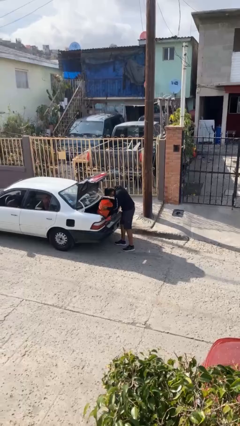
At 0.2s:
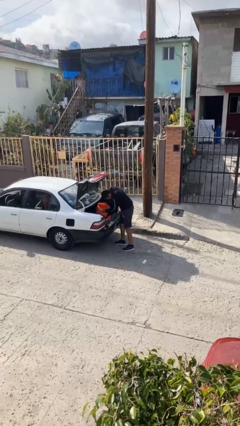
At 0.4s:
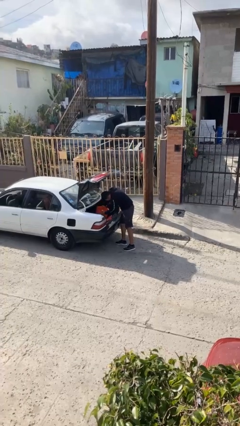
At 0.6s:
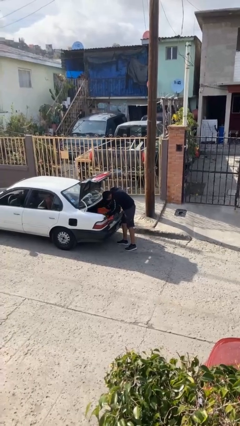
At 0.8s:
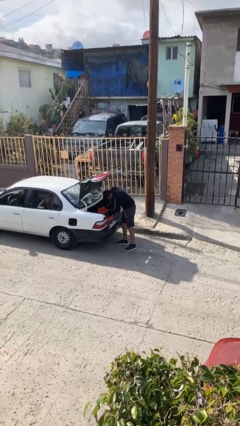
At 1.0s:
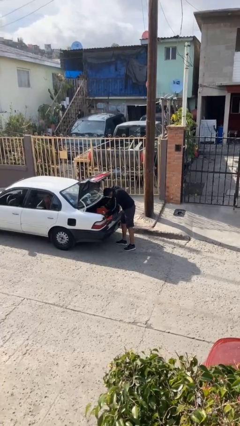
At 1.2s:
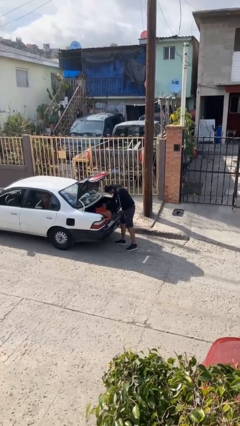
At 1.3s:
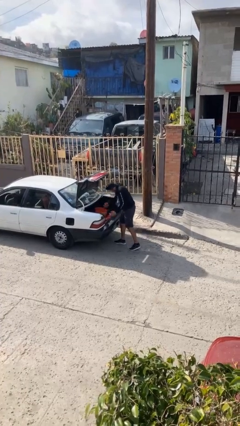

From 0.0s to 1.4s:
person loads car

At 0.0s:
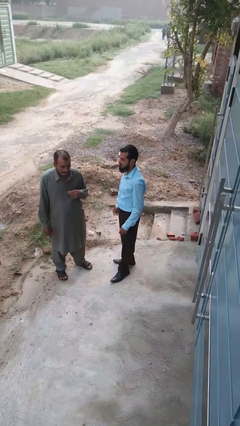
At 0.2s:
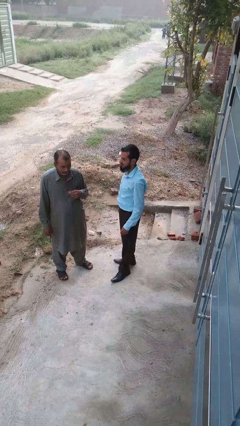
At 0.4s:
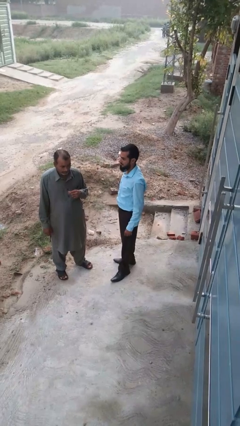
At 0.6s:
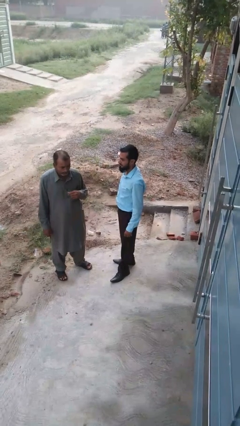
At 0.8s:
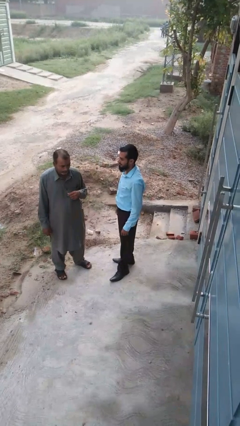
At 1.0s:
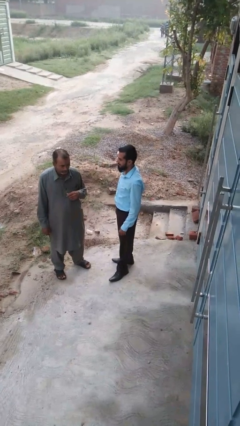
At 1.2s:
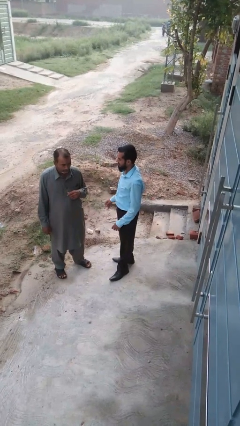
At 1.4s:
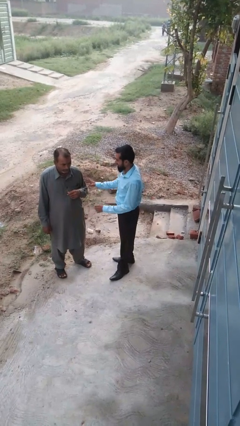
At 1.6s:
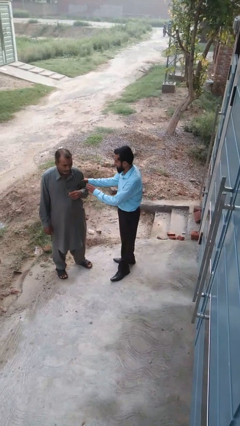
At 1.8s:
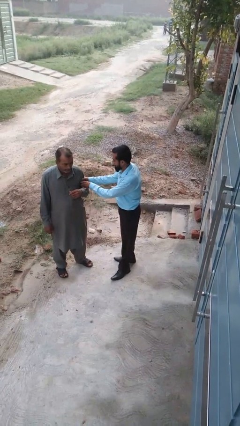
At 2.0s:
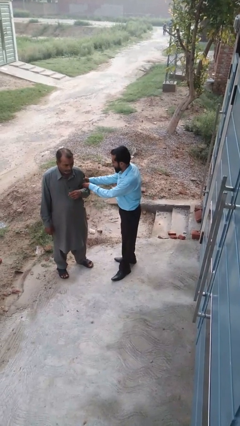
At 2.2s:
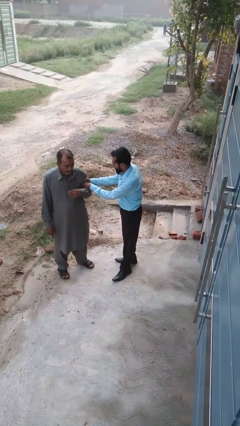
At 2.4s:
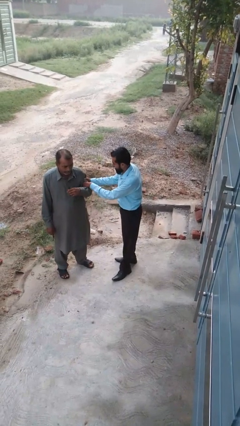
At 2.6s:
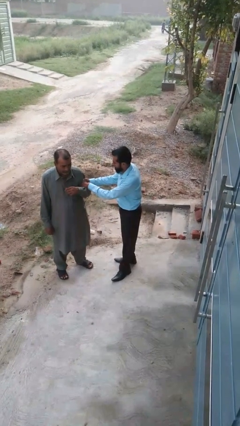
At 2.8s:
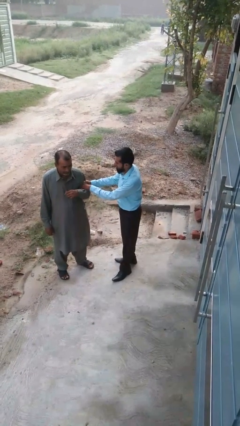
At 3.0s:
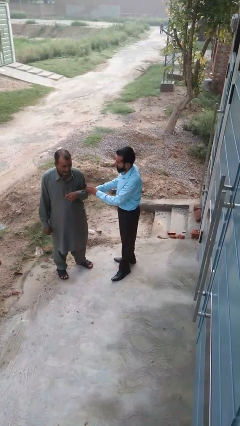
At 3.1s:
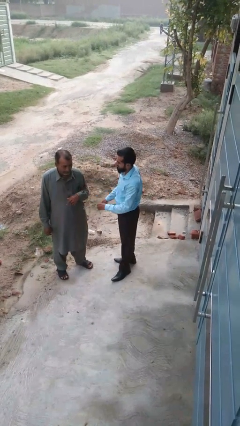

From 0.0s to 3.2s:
person grabs person by bicep

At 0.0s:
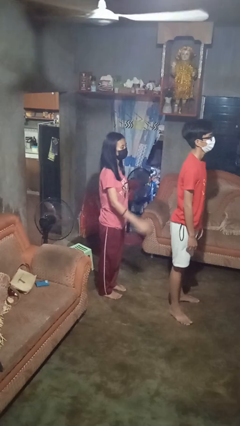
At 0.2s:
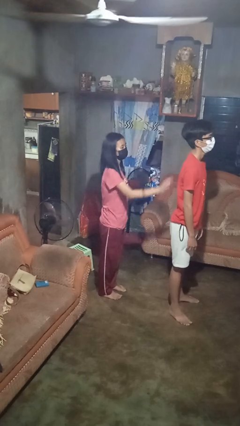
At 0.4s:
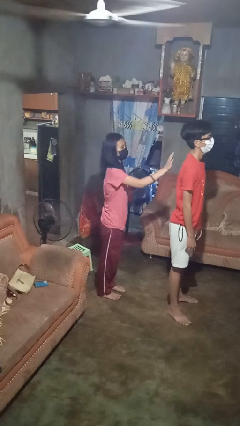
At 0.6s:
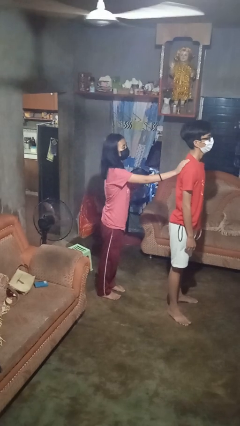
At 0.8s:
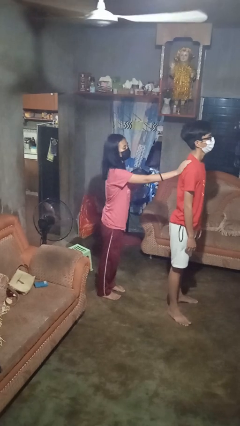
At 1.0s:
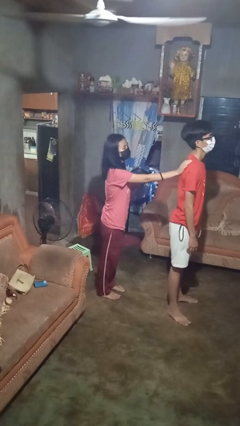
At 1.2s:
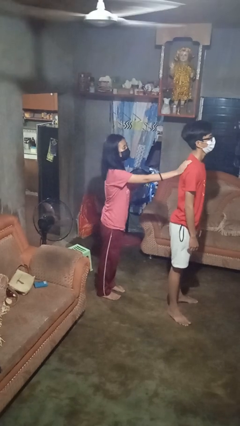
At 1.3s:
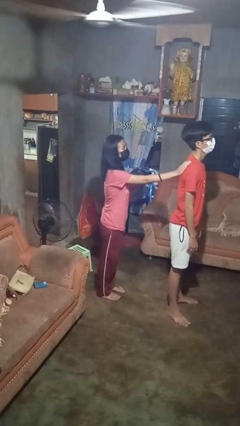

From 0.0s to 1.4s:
person touches back of person

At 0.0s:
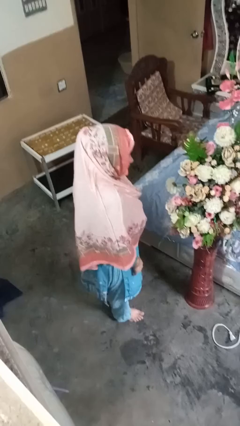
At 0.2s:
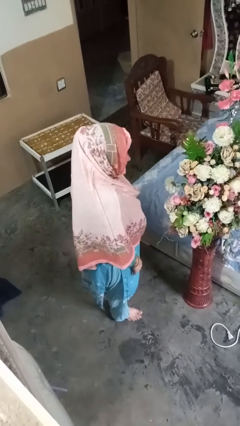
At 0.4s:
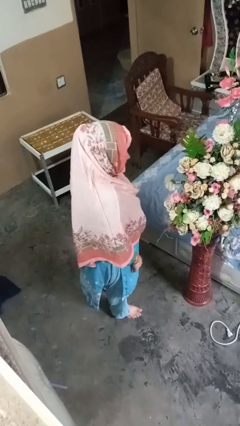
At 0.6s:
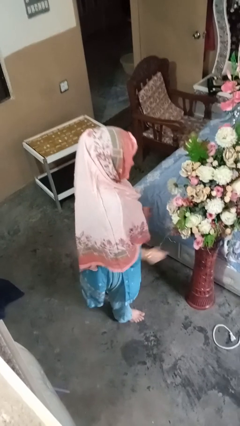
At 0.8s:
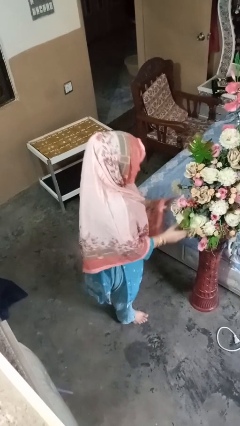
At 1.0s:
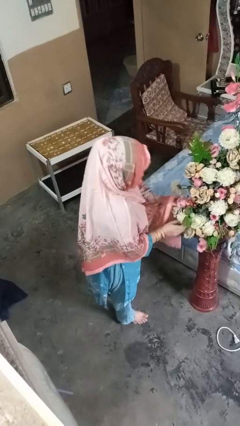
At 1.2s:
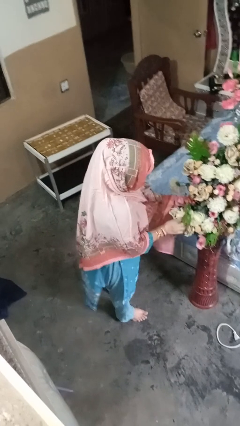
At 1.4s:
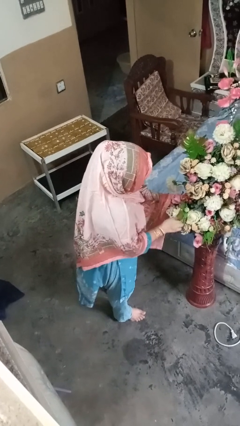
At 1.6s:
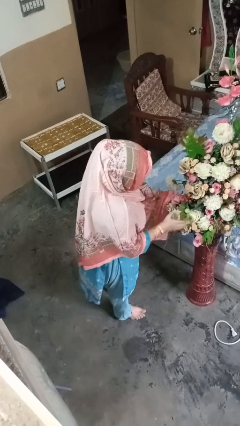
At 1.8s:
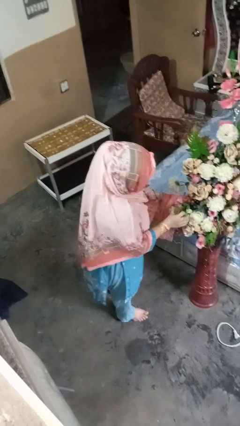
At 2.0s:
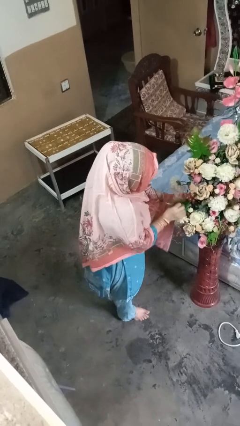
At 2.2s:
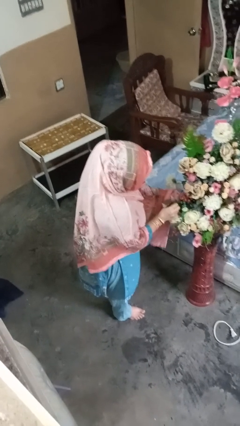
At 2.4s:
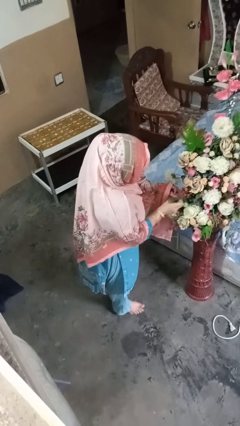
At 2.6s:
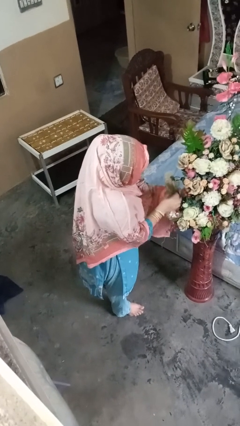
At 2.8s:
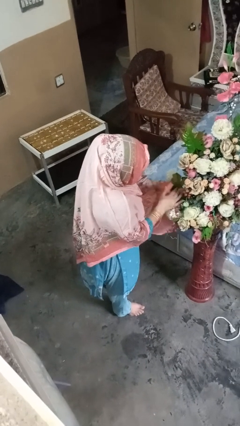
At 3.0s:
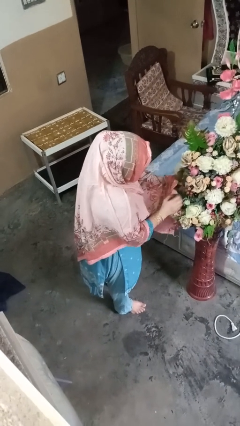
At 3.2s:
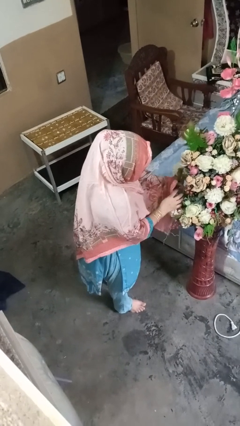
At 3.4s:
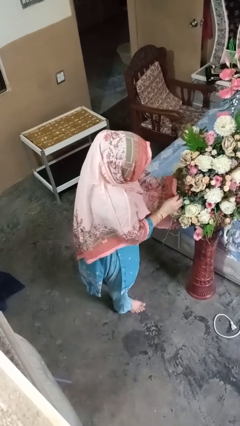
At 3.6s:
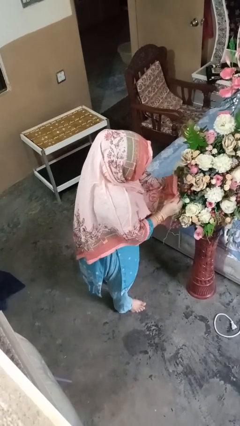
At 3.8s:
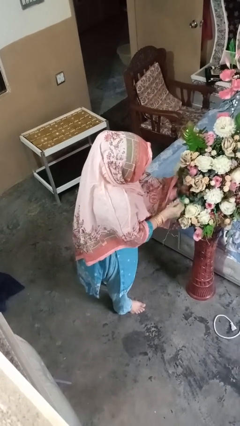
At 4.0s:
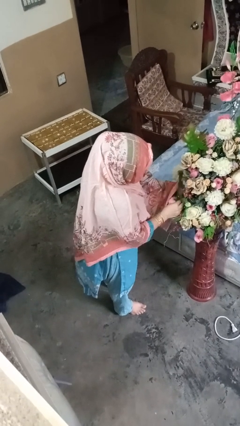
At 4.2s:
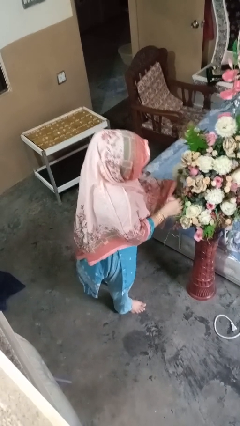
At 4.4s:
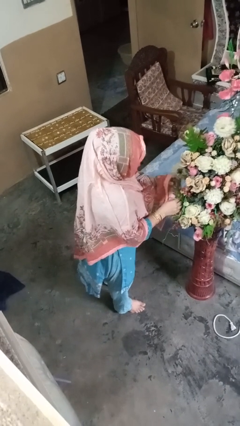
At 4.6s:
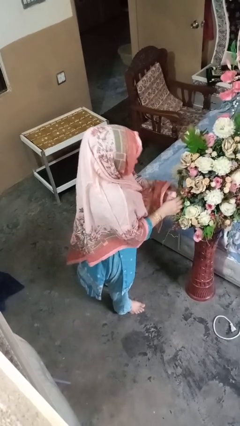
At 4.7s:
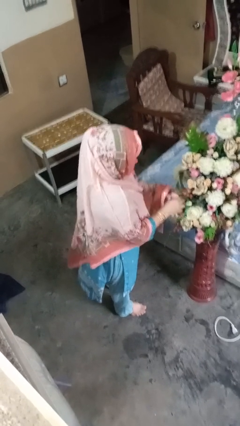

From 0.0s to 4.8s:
person arranges flowers in vase

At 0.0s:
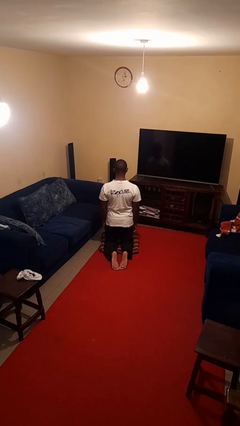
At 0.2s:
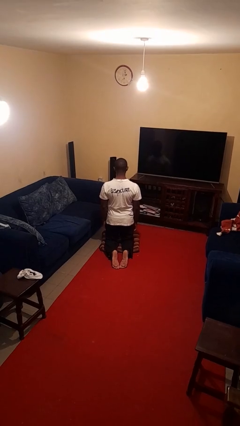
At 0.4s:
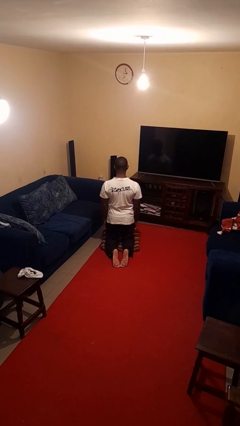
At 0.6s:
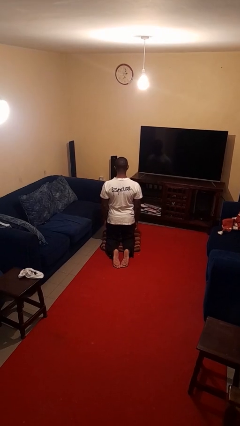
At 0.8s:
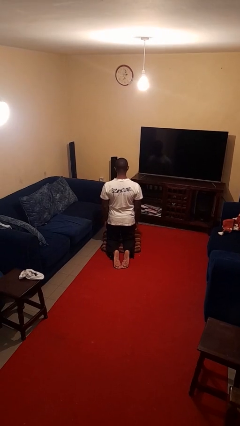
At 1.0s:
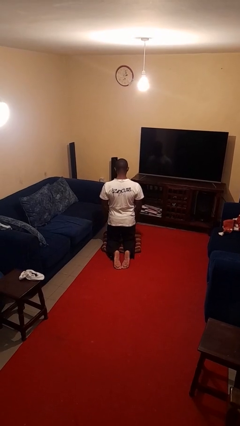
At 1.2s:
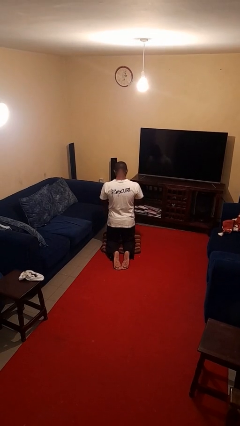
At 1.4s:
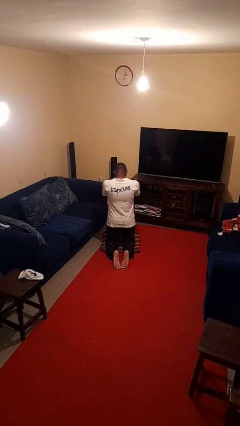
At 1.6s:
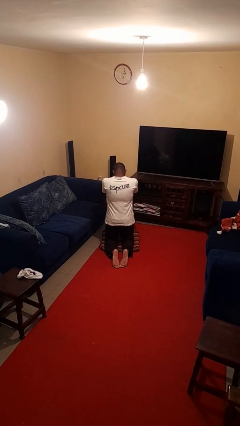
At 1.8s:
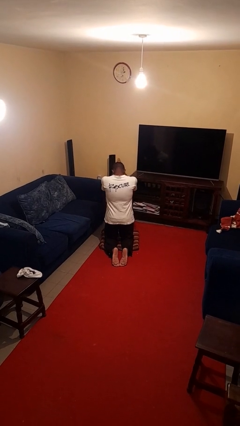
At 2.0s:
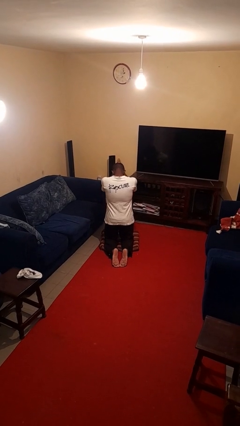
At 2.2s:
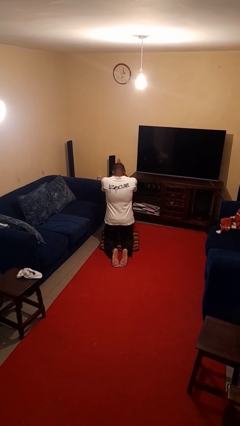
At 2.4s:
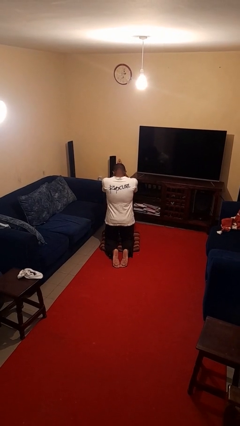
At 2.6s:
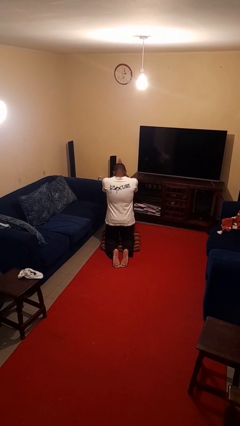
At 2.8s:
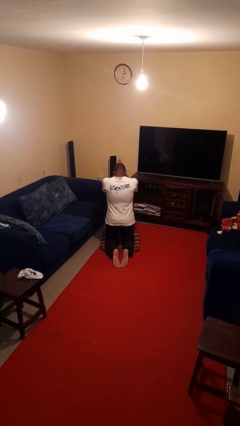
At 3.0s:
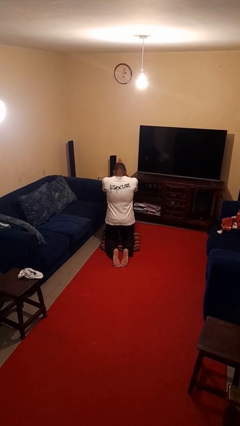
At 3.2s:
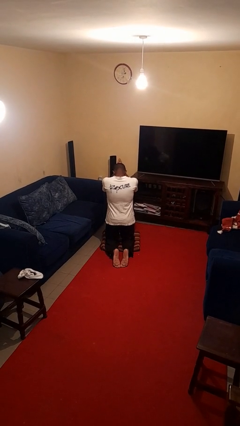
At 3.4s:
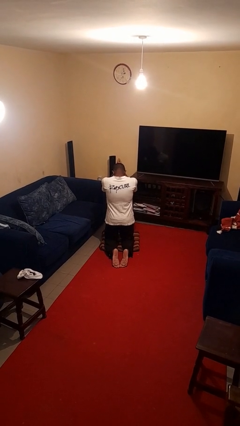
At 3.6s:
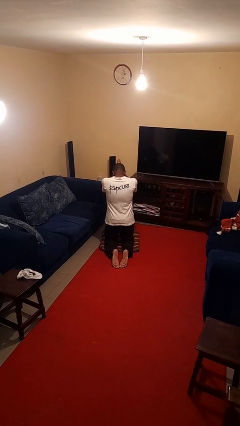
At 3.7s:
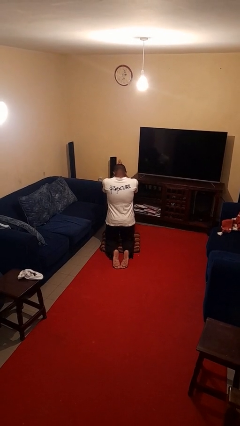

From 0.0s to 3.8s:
person prays

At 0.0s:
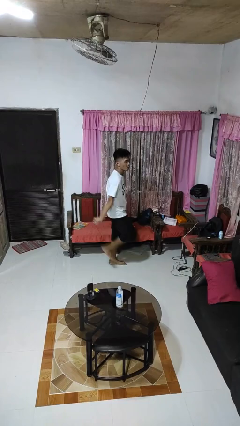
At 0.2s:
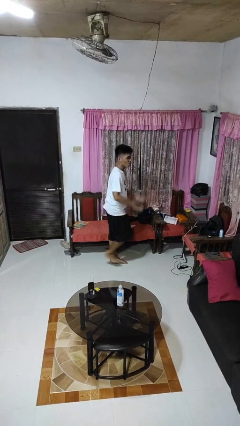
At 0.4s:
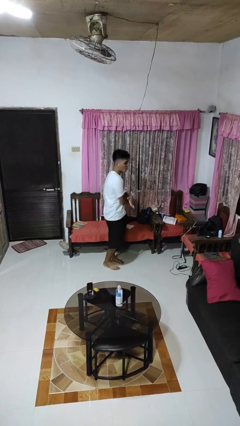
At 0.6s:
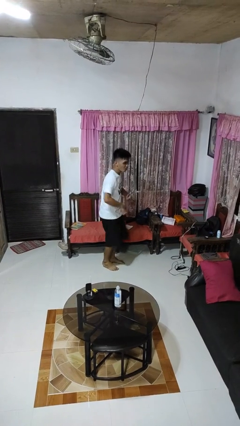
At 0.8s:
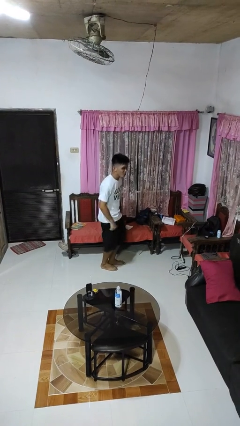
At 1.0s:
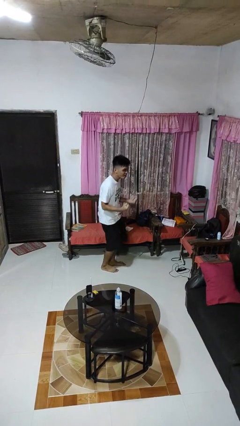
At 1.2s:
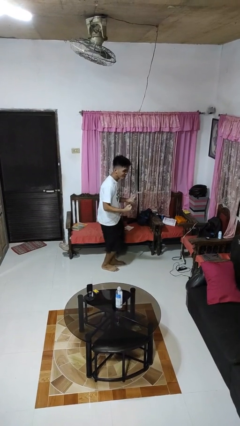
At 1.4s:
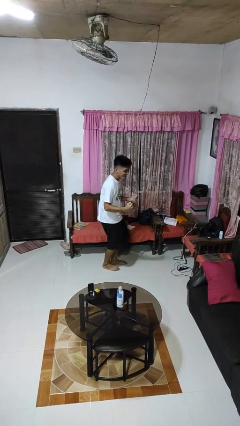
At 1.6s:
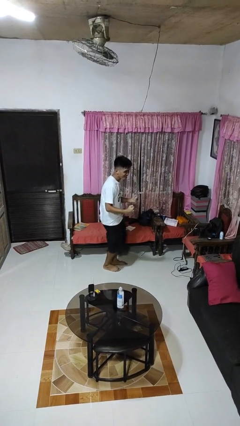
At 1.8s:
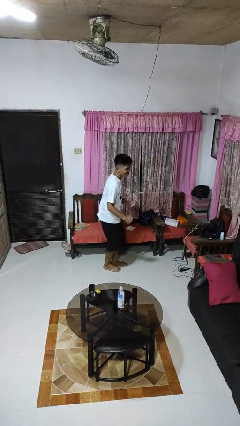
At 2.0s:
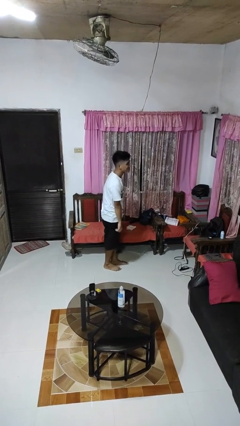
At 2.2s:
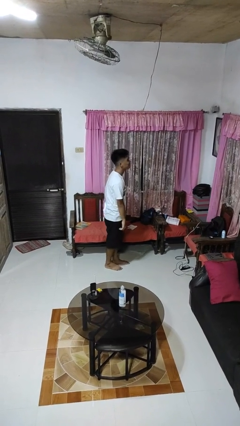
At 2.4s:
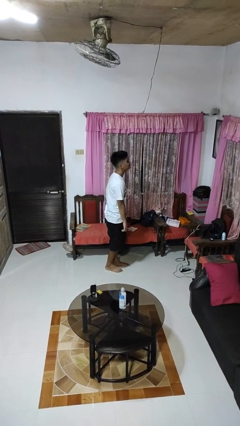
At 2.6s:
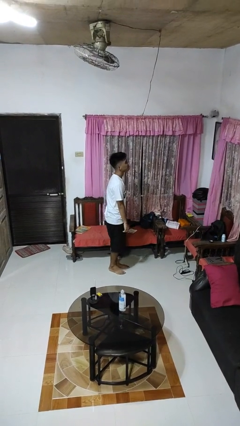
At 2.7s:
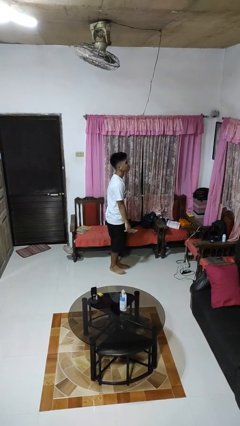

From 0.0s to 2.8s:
person dances in place
